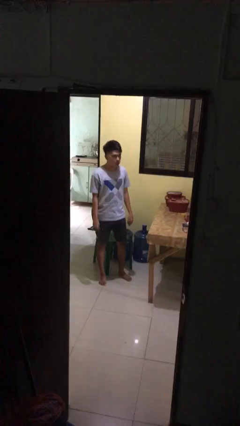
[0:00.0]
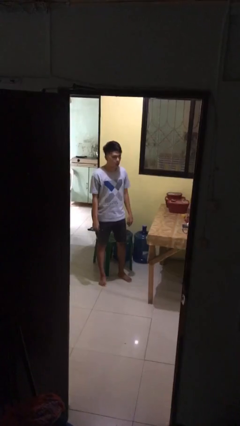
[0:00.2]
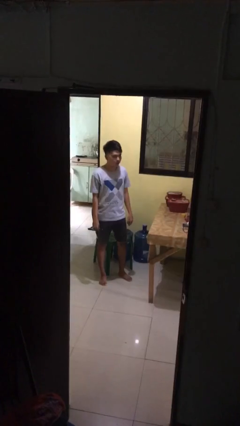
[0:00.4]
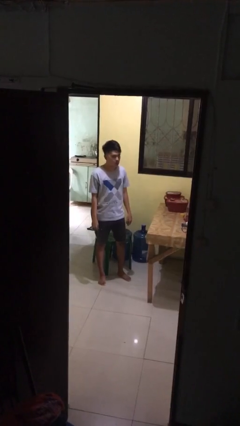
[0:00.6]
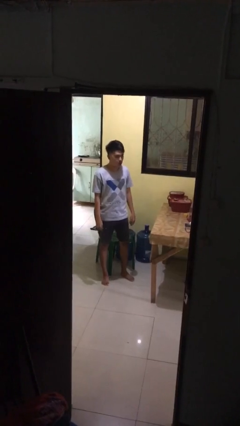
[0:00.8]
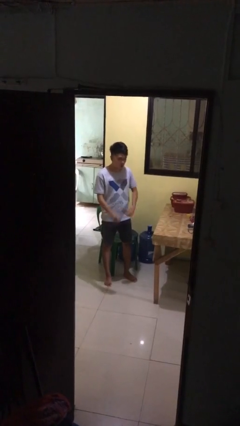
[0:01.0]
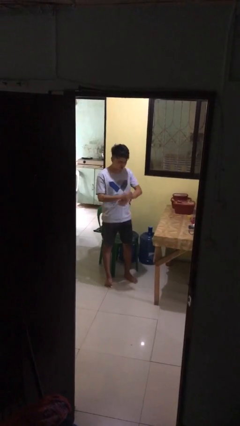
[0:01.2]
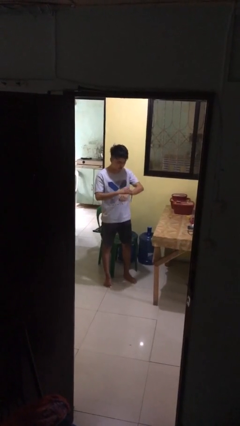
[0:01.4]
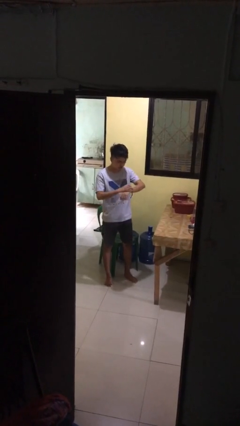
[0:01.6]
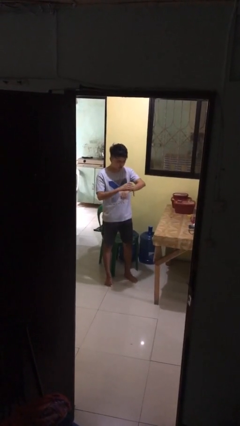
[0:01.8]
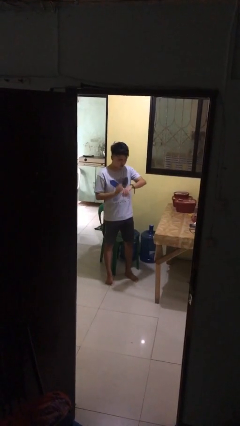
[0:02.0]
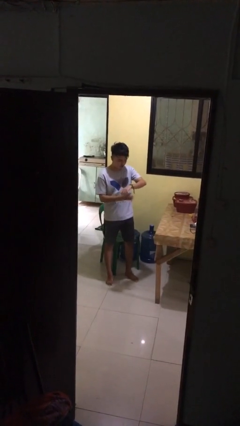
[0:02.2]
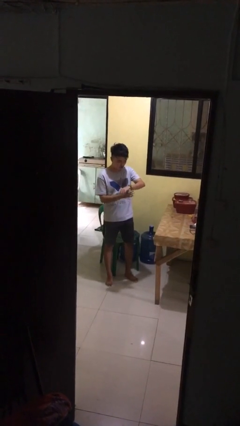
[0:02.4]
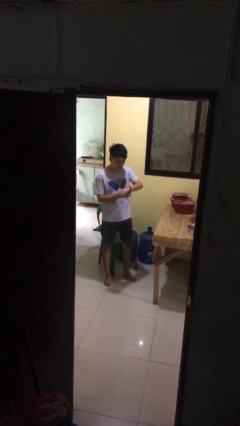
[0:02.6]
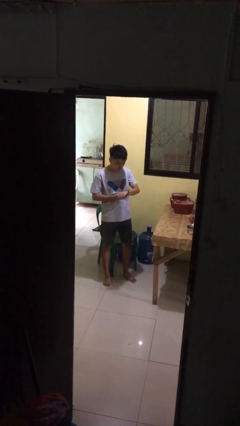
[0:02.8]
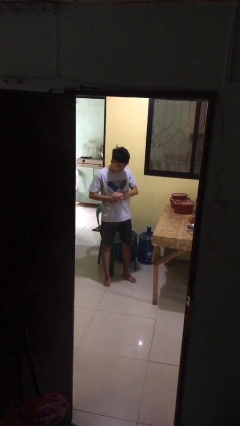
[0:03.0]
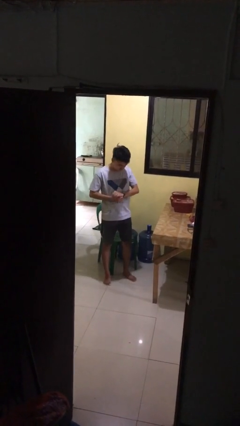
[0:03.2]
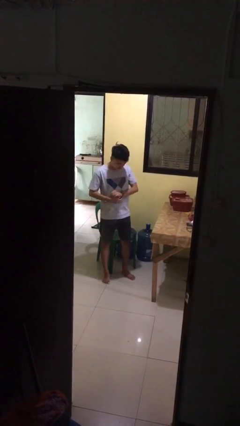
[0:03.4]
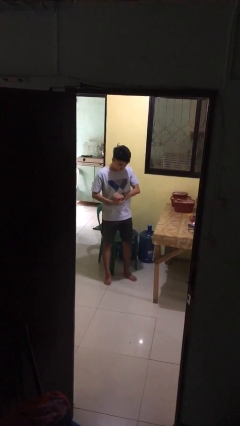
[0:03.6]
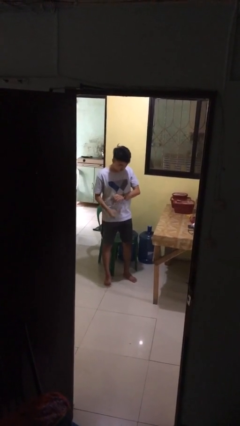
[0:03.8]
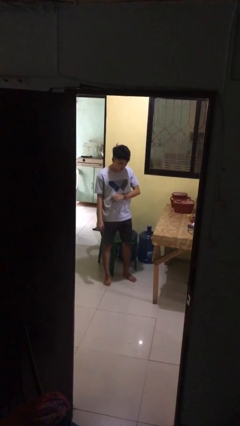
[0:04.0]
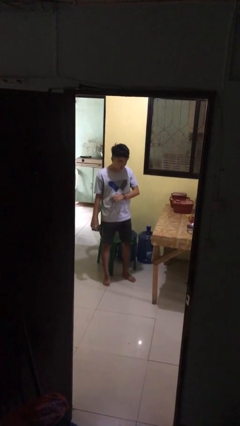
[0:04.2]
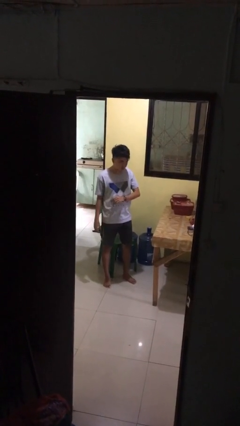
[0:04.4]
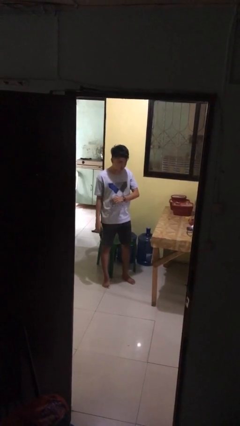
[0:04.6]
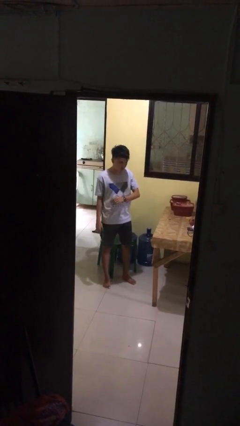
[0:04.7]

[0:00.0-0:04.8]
person puts on wristwatch

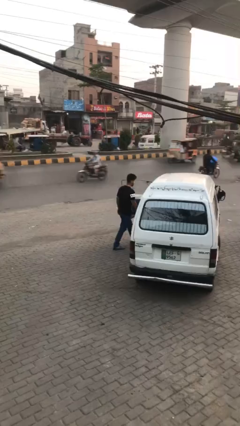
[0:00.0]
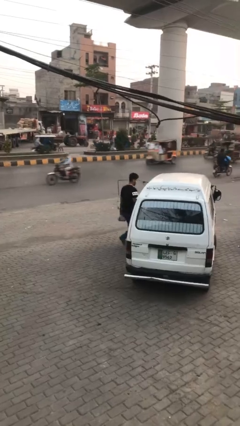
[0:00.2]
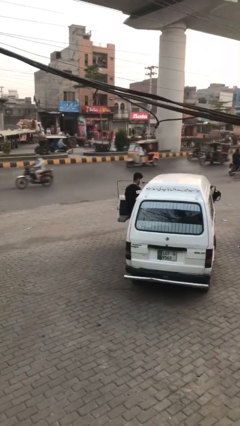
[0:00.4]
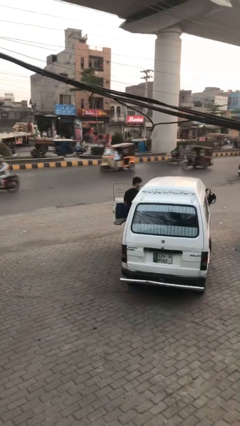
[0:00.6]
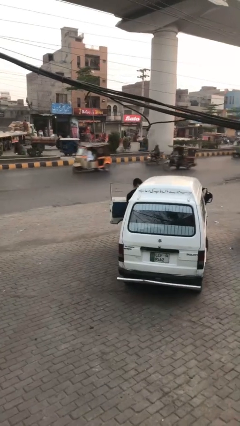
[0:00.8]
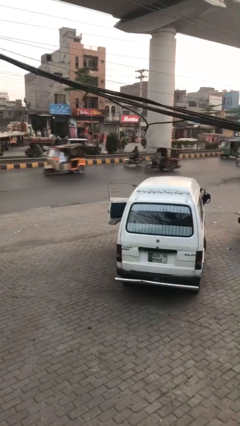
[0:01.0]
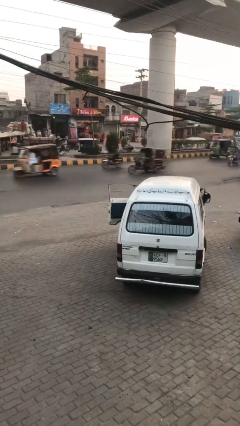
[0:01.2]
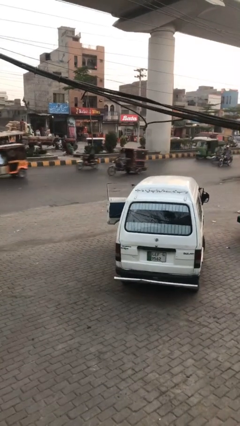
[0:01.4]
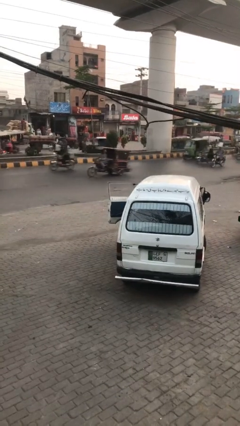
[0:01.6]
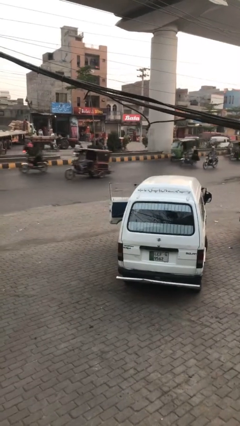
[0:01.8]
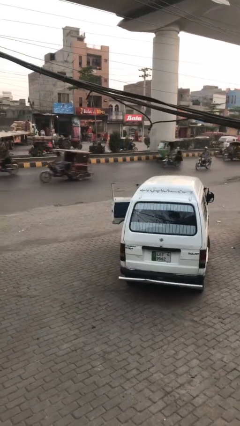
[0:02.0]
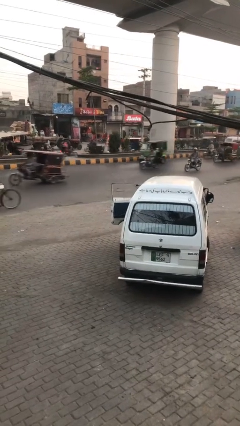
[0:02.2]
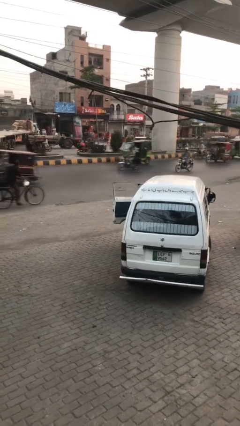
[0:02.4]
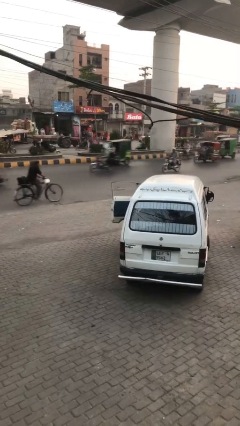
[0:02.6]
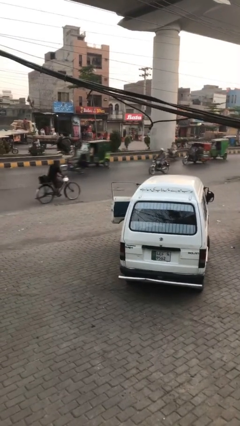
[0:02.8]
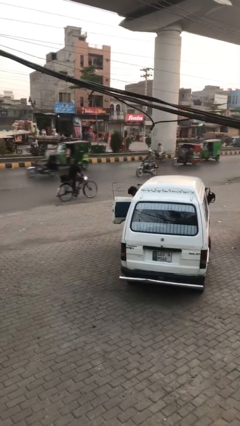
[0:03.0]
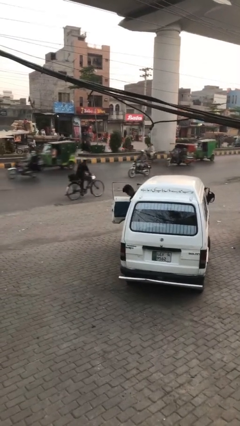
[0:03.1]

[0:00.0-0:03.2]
person enters car

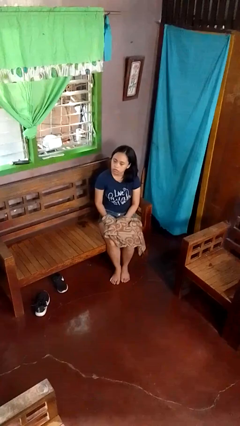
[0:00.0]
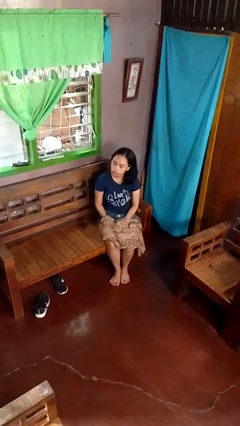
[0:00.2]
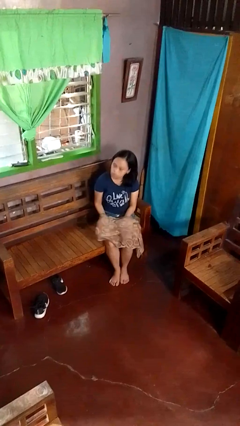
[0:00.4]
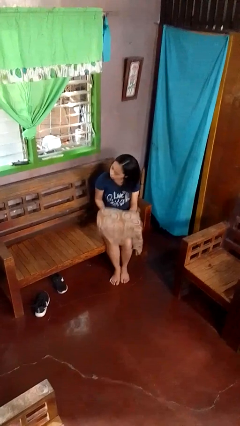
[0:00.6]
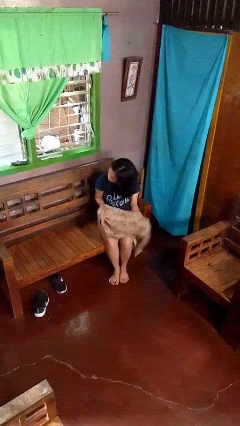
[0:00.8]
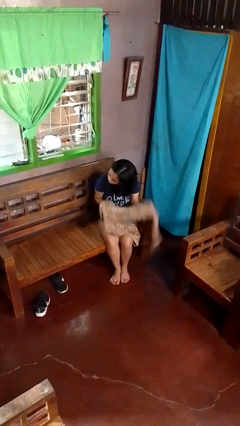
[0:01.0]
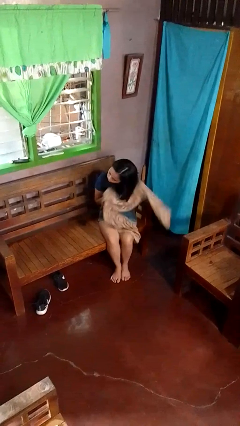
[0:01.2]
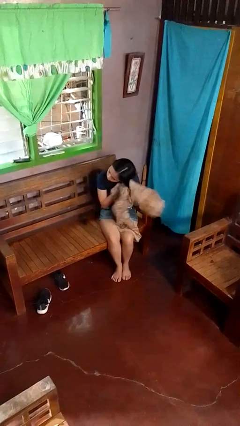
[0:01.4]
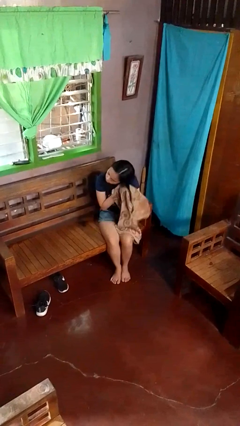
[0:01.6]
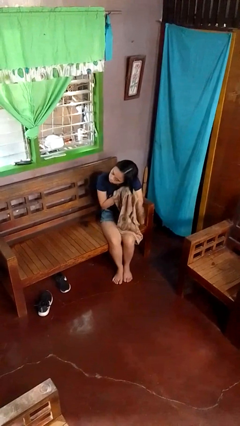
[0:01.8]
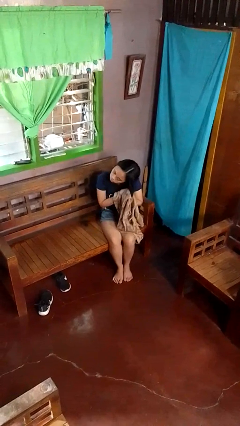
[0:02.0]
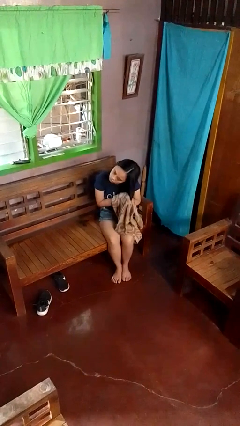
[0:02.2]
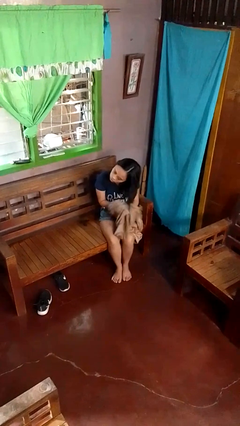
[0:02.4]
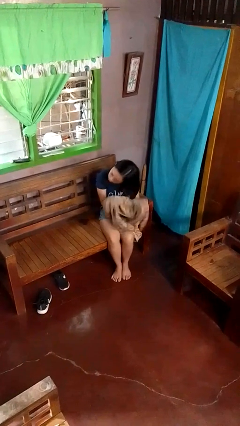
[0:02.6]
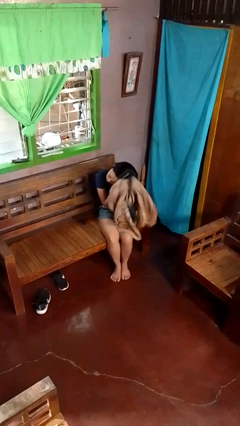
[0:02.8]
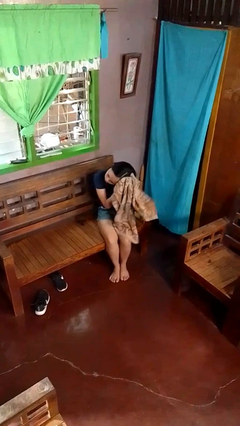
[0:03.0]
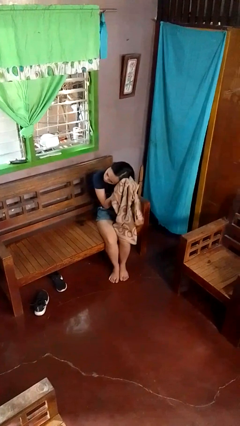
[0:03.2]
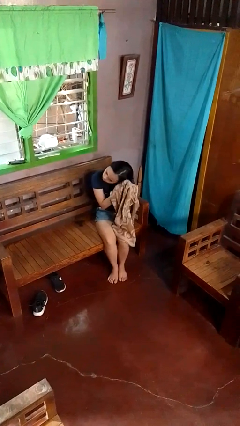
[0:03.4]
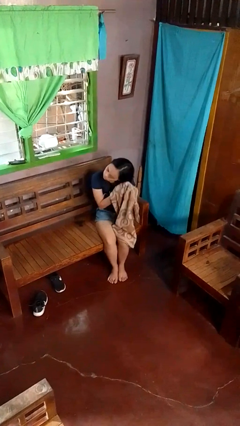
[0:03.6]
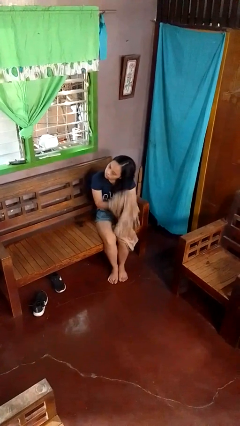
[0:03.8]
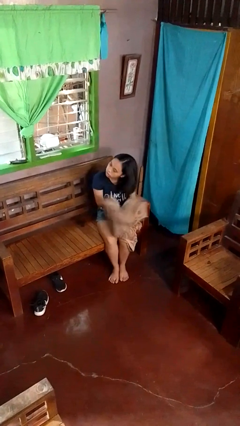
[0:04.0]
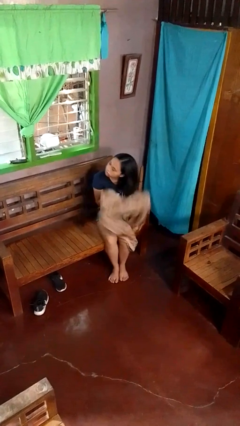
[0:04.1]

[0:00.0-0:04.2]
person dries hair with towel

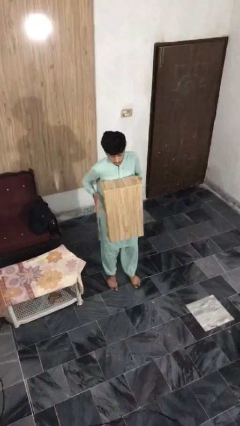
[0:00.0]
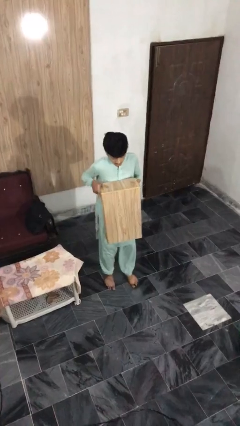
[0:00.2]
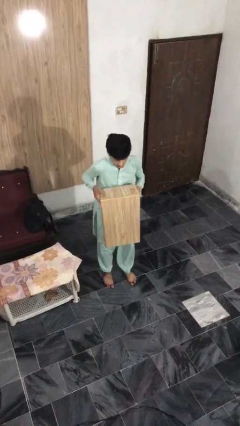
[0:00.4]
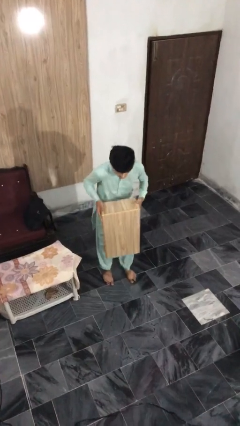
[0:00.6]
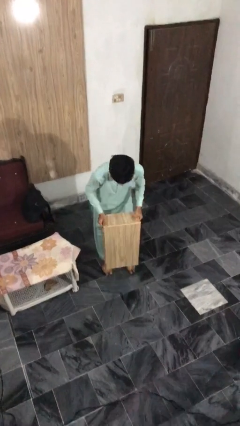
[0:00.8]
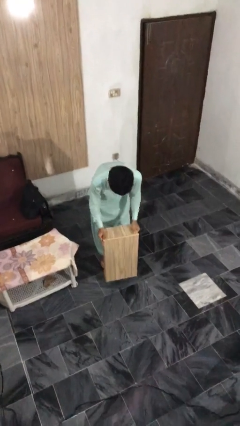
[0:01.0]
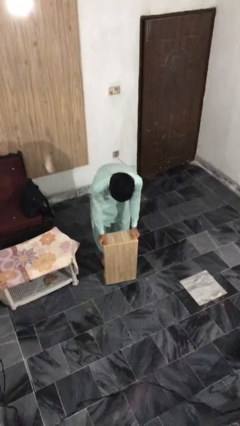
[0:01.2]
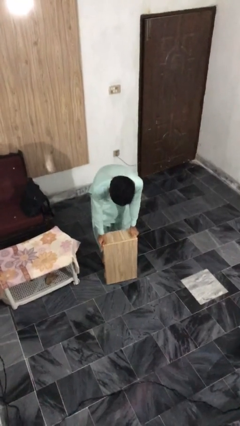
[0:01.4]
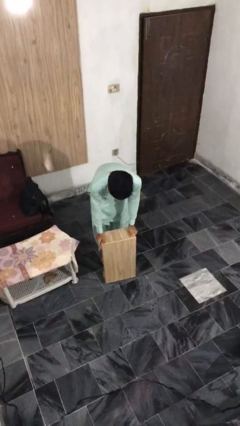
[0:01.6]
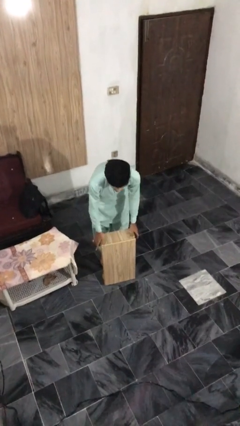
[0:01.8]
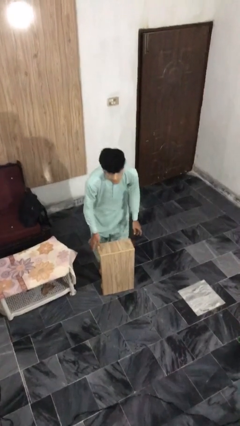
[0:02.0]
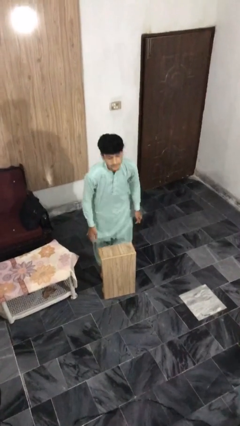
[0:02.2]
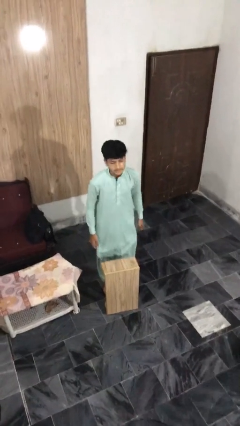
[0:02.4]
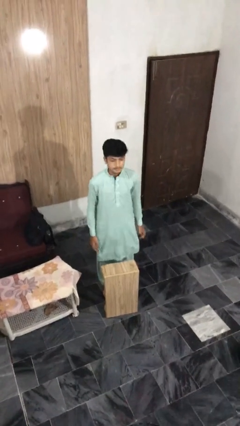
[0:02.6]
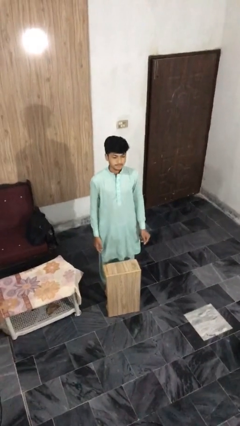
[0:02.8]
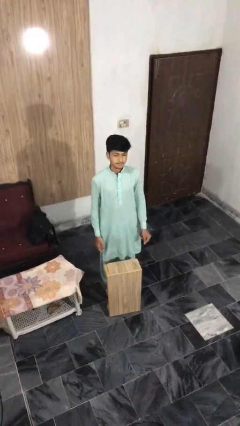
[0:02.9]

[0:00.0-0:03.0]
person puts down object on floor

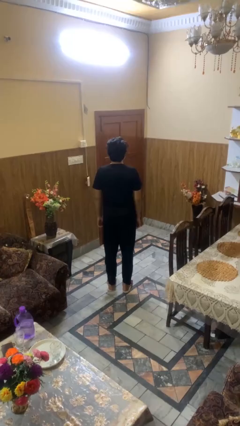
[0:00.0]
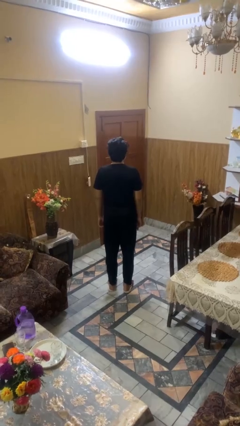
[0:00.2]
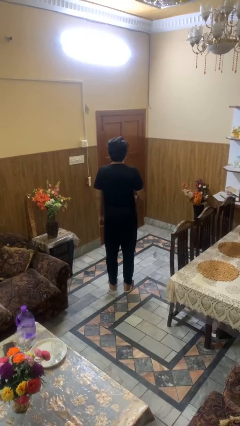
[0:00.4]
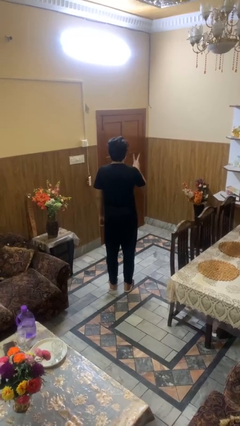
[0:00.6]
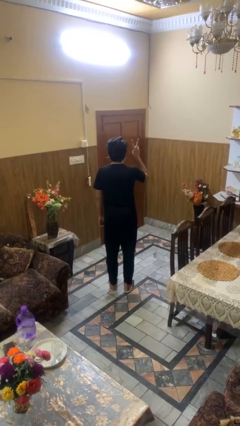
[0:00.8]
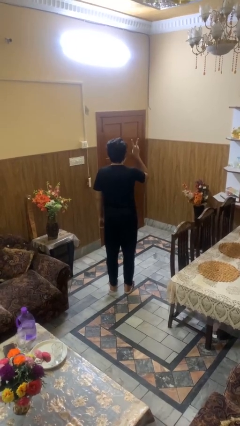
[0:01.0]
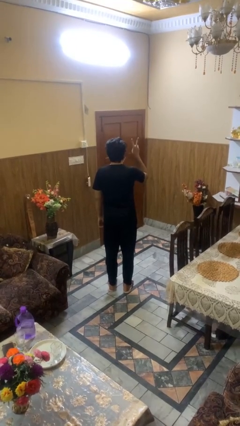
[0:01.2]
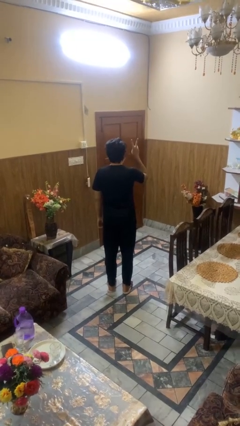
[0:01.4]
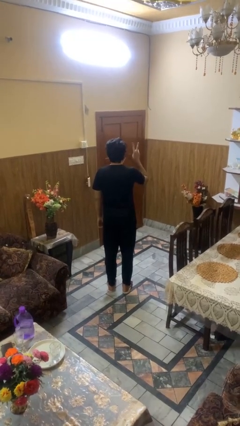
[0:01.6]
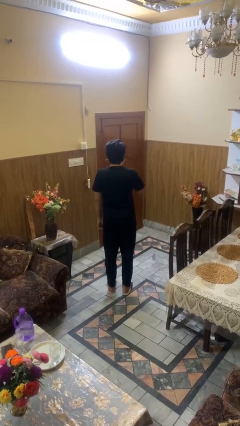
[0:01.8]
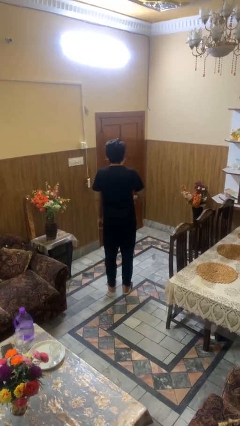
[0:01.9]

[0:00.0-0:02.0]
person gestures peace

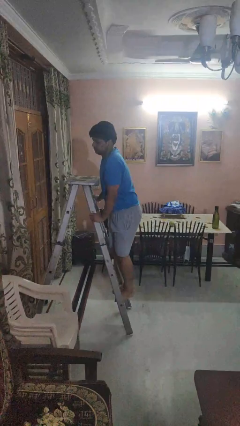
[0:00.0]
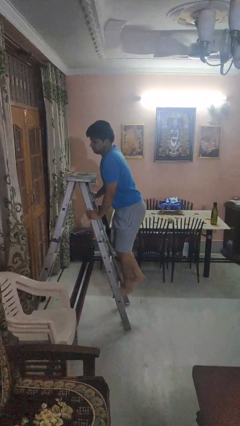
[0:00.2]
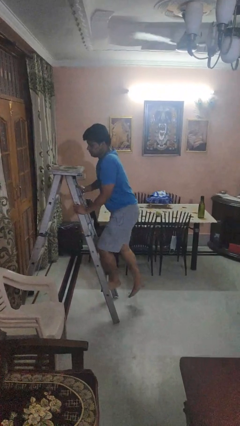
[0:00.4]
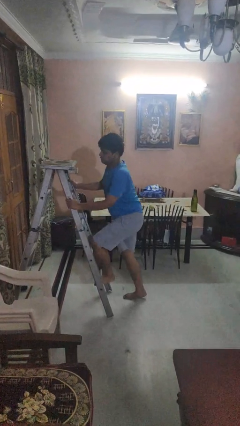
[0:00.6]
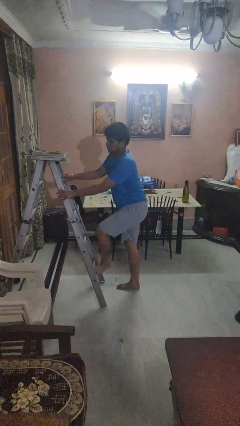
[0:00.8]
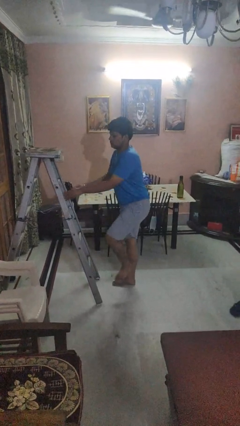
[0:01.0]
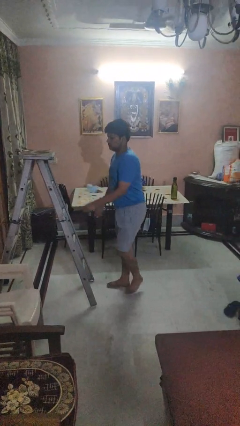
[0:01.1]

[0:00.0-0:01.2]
person climbs down ladder
